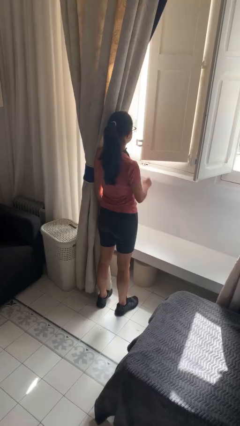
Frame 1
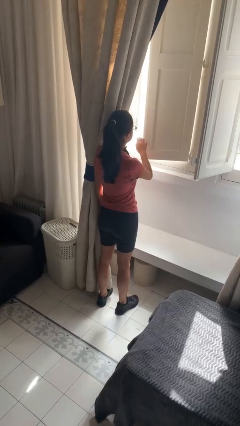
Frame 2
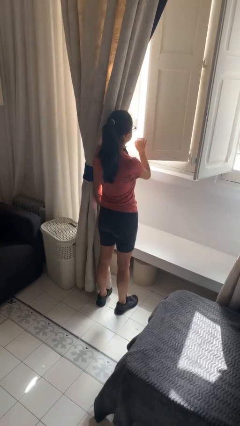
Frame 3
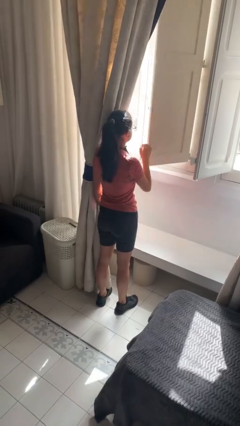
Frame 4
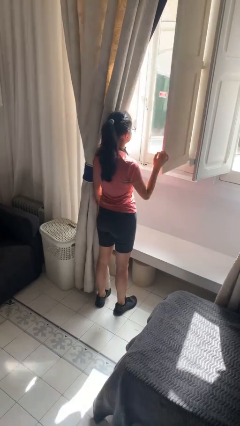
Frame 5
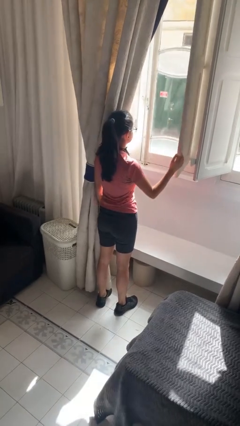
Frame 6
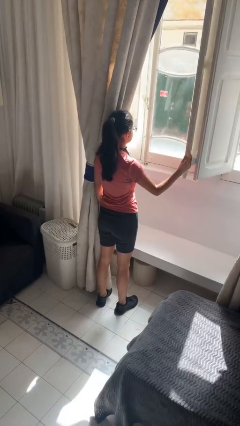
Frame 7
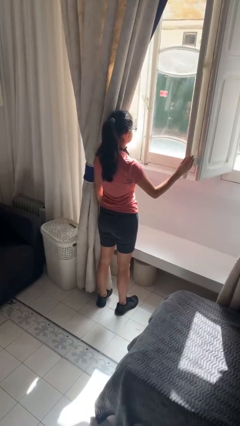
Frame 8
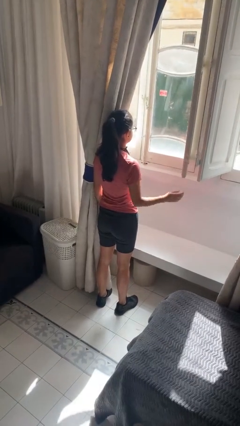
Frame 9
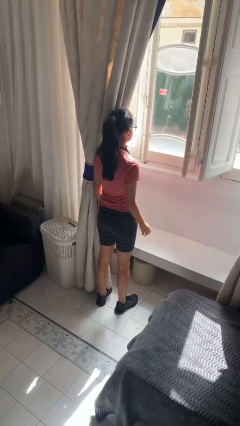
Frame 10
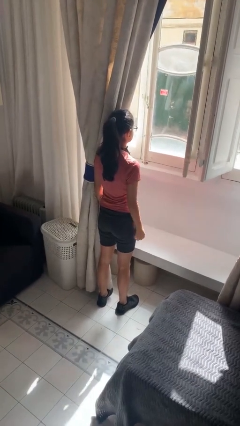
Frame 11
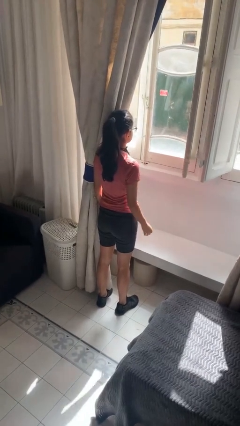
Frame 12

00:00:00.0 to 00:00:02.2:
person opens home window

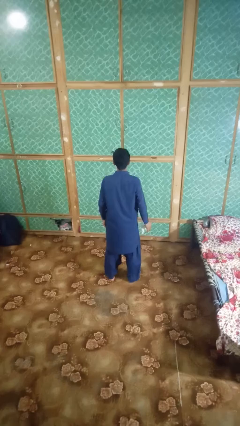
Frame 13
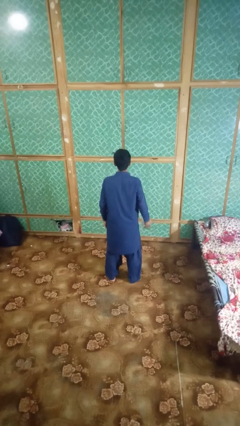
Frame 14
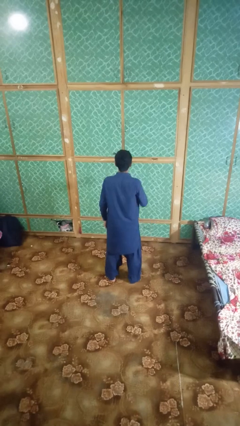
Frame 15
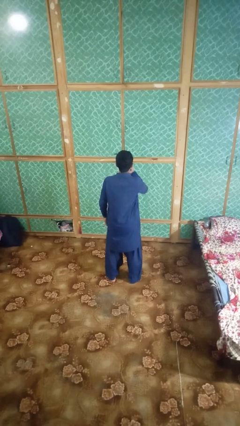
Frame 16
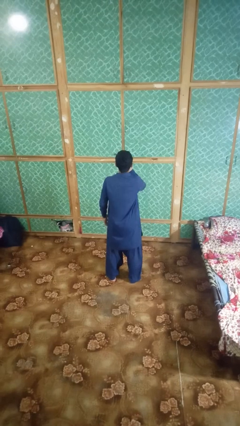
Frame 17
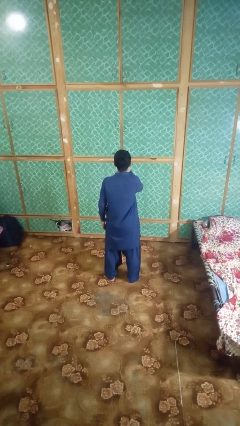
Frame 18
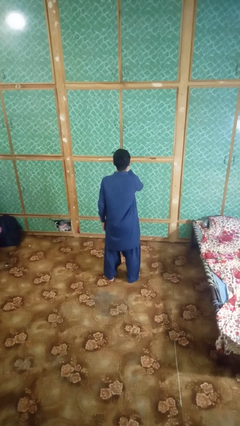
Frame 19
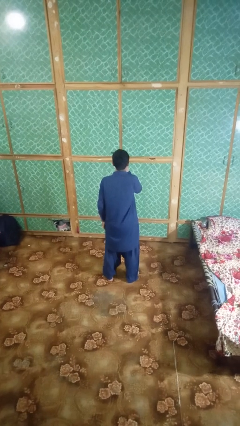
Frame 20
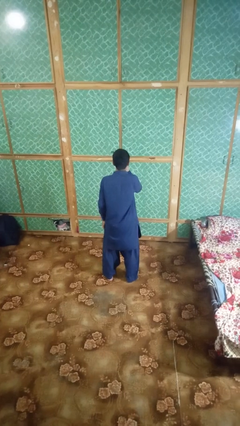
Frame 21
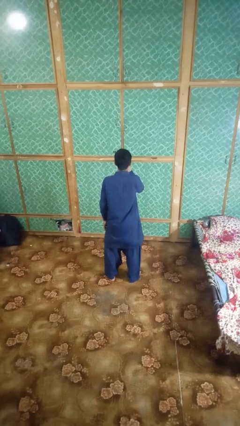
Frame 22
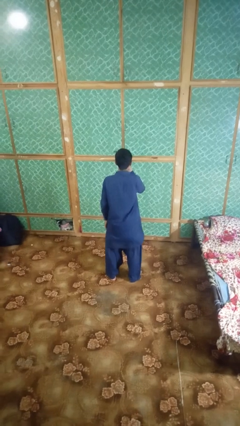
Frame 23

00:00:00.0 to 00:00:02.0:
person blows nose

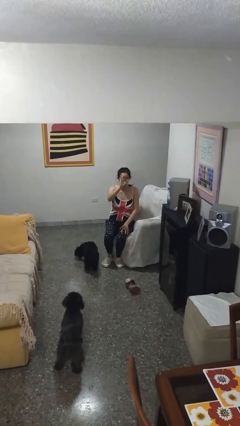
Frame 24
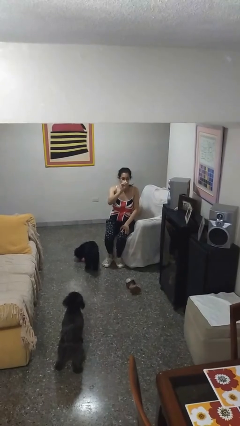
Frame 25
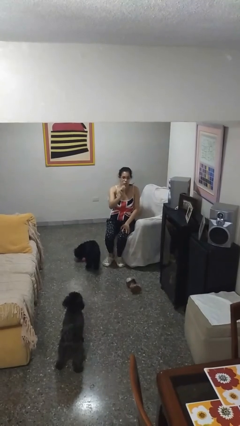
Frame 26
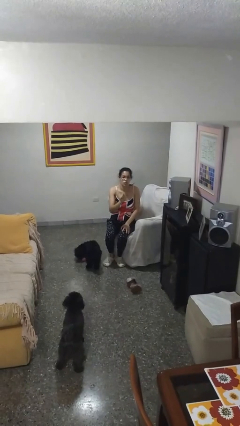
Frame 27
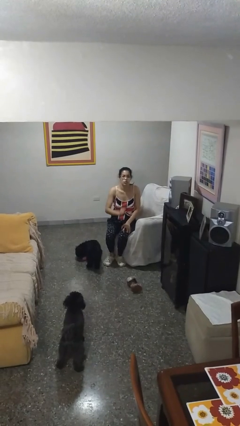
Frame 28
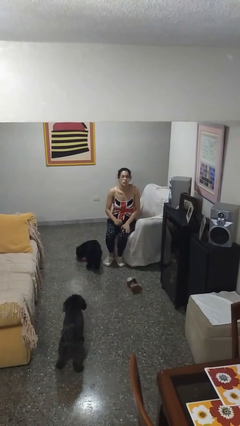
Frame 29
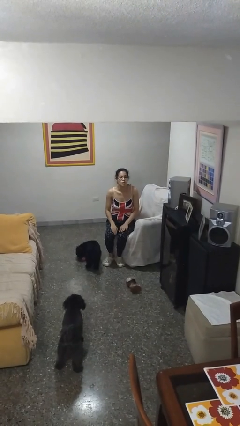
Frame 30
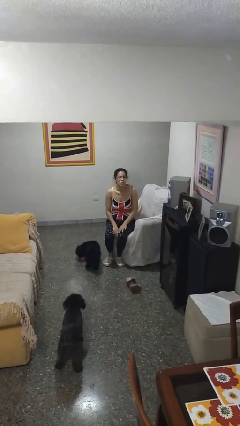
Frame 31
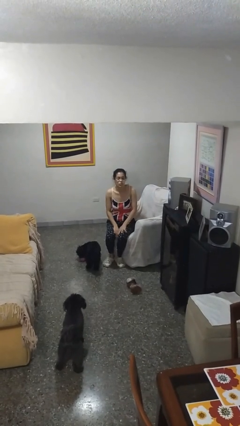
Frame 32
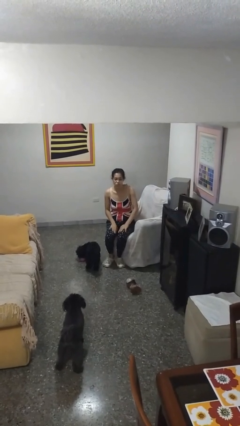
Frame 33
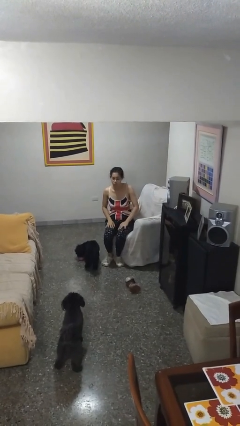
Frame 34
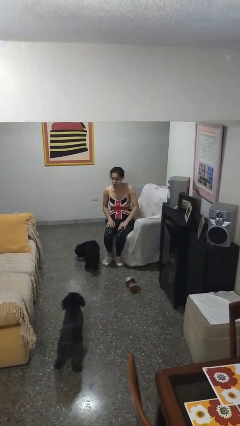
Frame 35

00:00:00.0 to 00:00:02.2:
person gestures lower hand

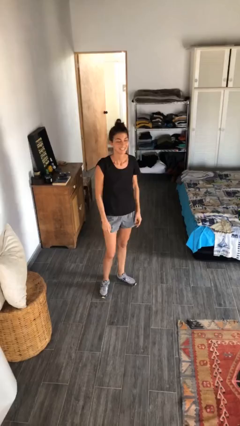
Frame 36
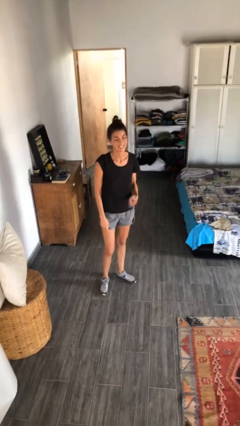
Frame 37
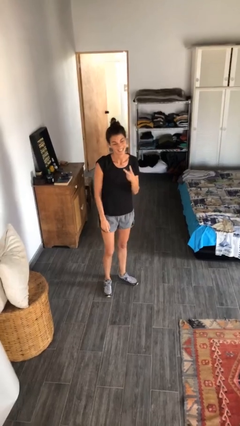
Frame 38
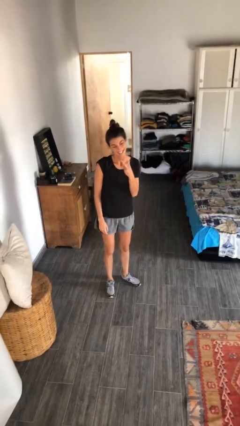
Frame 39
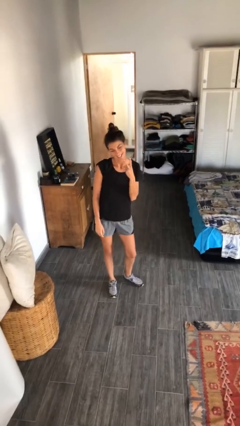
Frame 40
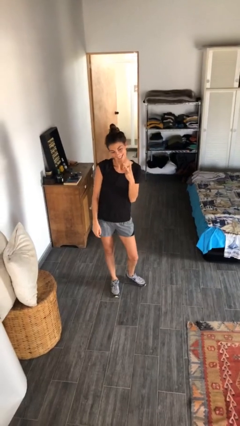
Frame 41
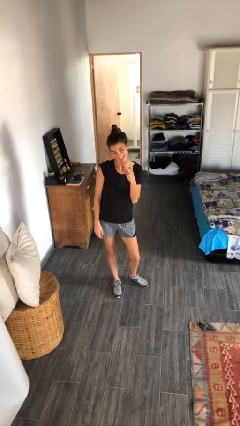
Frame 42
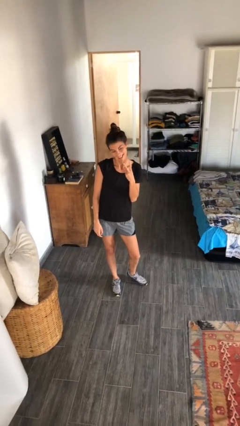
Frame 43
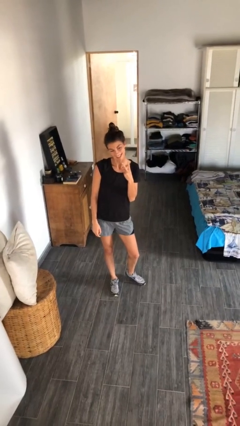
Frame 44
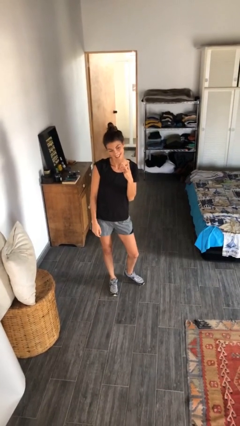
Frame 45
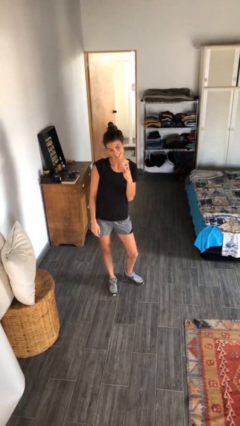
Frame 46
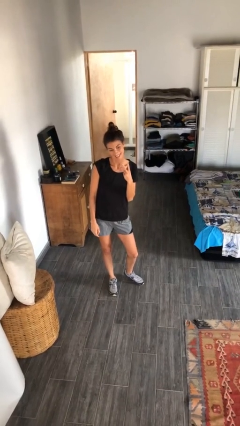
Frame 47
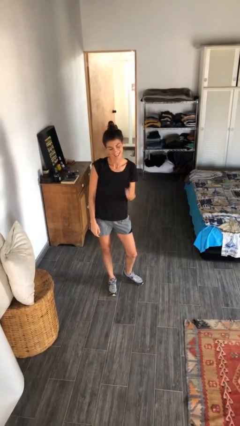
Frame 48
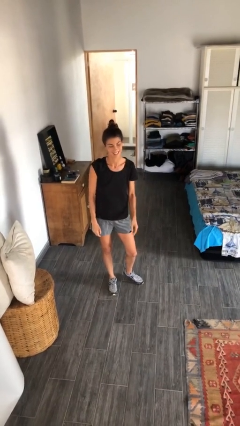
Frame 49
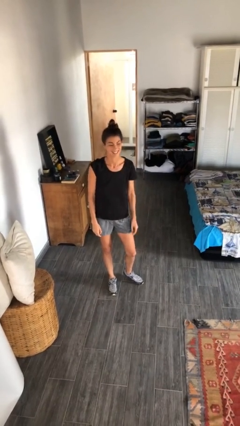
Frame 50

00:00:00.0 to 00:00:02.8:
person gestures peace

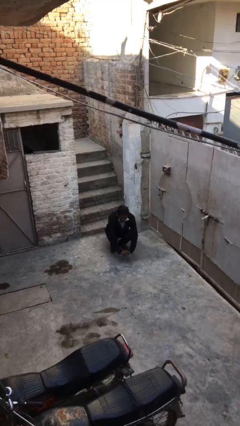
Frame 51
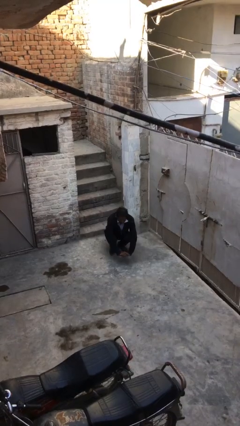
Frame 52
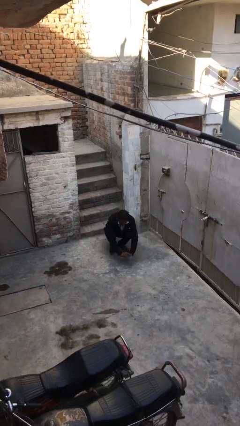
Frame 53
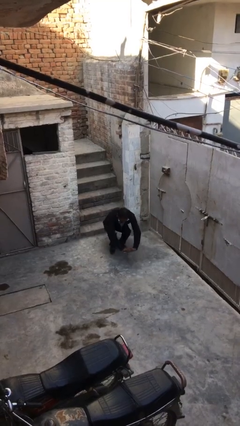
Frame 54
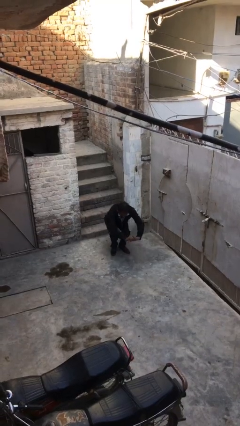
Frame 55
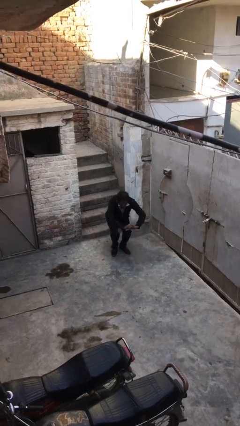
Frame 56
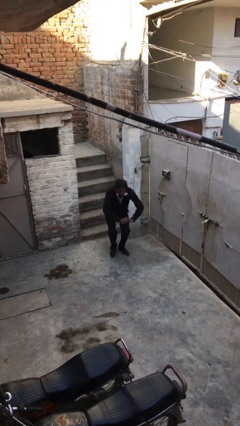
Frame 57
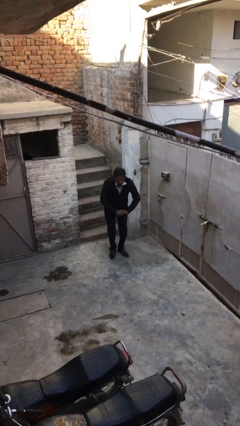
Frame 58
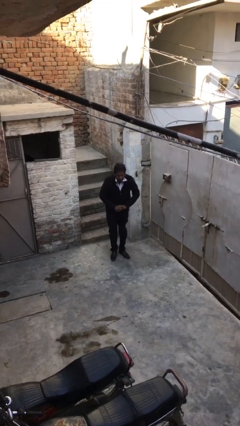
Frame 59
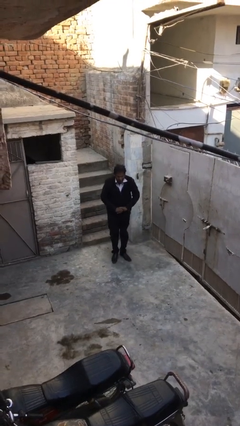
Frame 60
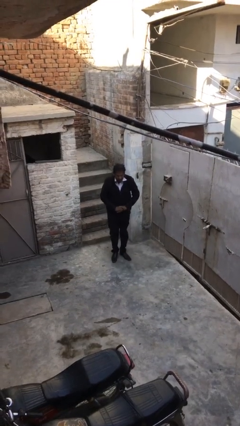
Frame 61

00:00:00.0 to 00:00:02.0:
person stands up

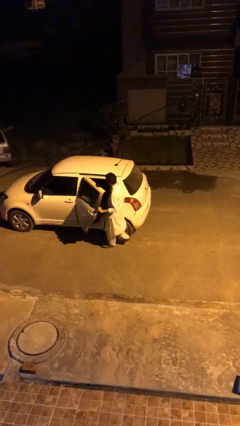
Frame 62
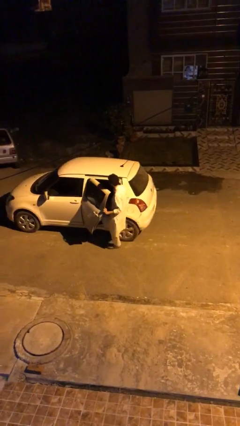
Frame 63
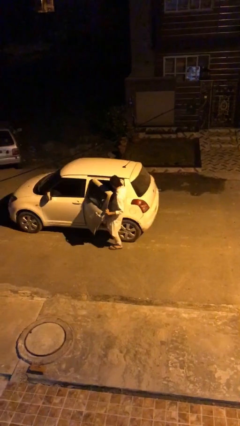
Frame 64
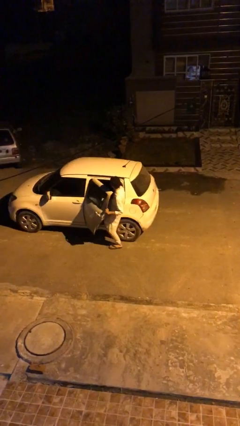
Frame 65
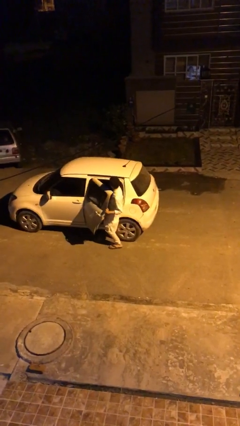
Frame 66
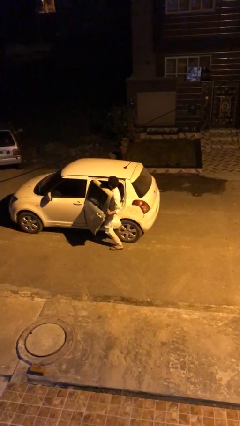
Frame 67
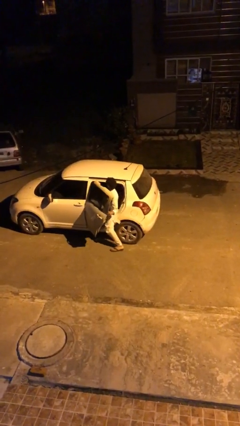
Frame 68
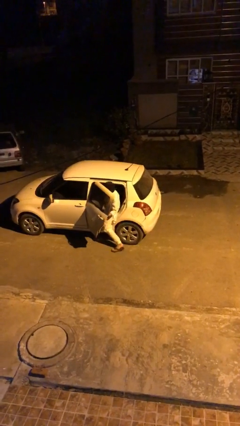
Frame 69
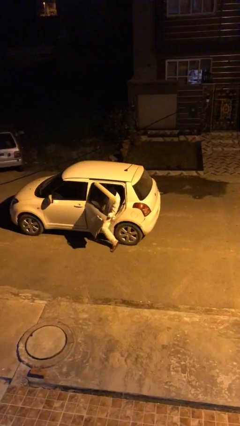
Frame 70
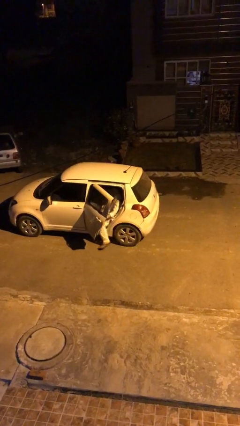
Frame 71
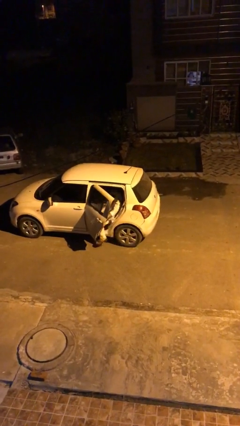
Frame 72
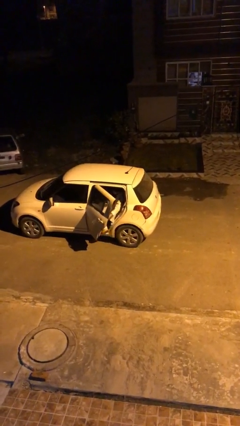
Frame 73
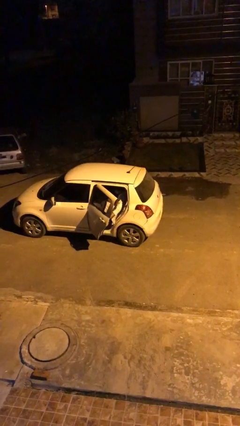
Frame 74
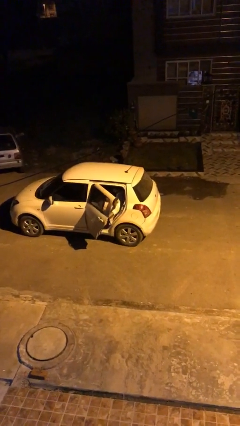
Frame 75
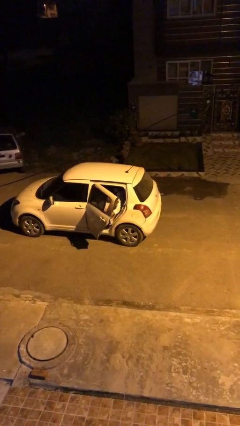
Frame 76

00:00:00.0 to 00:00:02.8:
person enters car

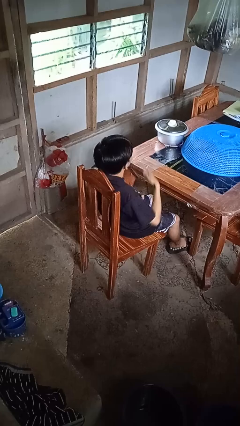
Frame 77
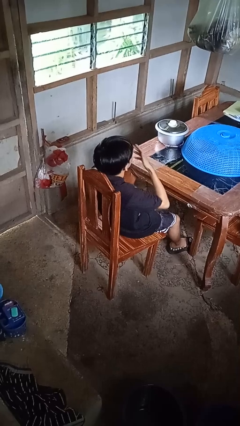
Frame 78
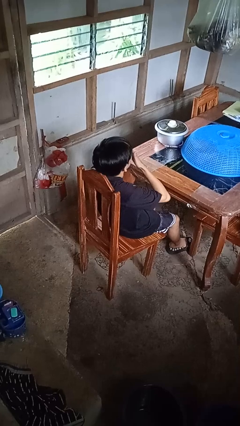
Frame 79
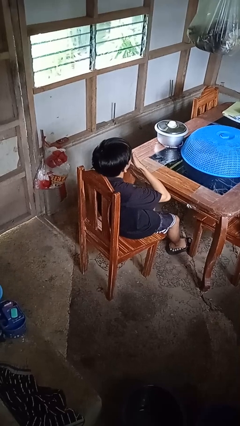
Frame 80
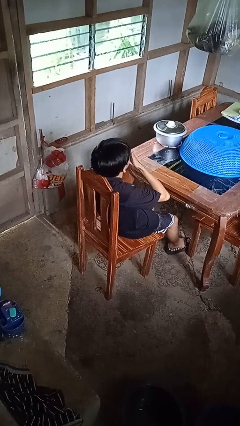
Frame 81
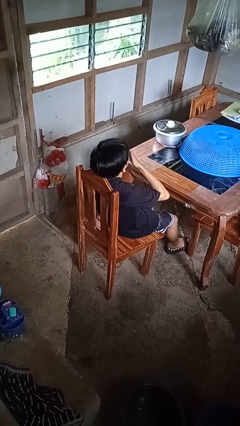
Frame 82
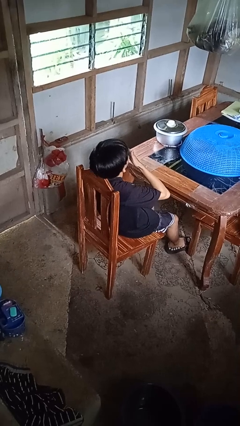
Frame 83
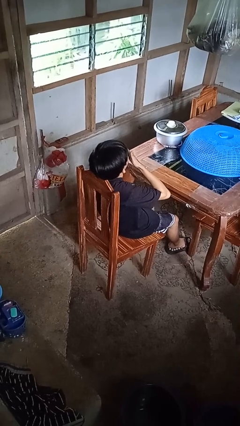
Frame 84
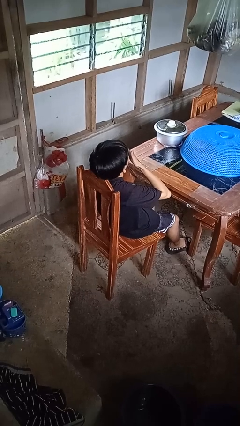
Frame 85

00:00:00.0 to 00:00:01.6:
person yawns

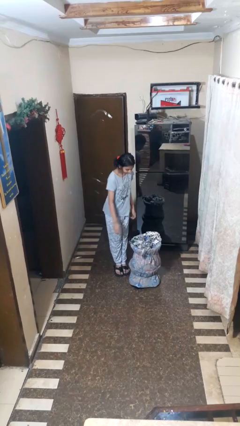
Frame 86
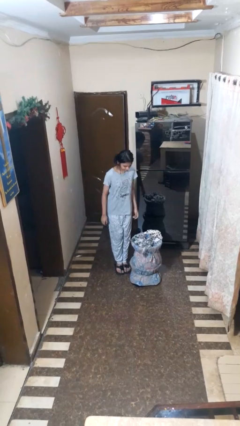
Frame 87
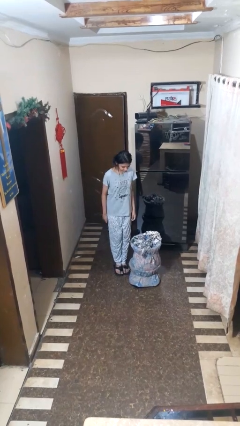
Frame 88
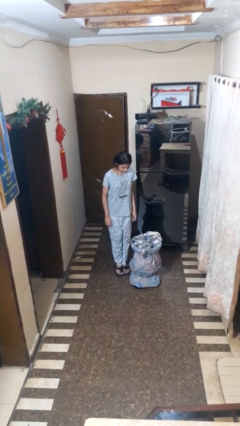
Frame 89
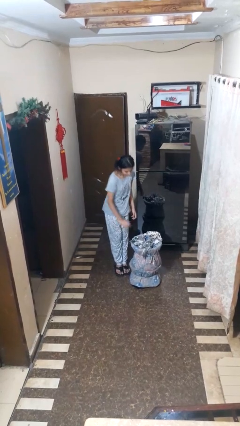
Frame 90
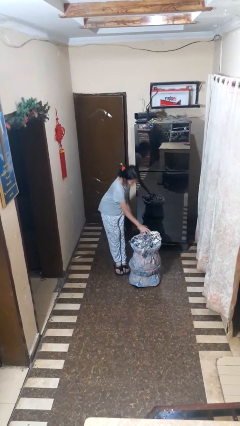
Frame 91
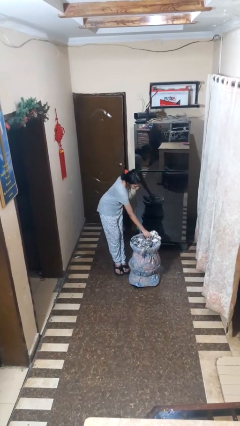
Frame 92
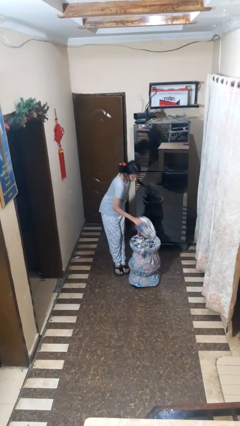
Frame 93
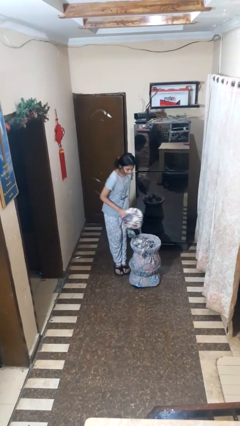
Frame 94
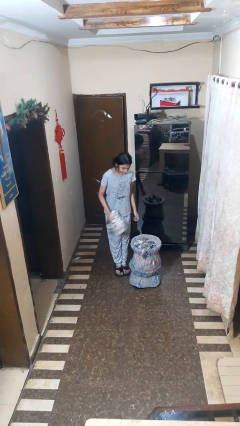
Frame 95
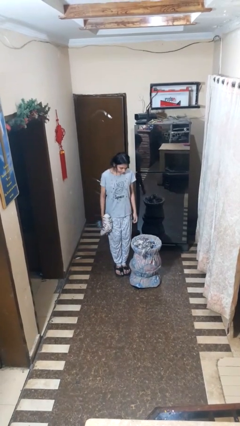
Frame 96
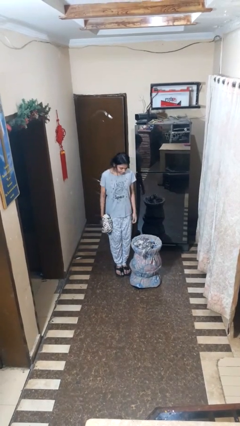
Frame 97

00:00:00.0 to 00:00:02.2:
person puts object into basket
